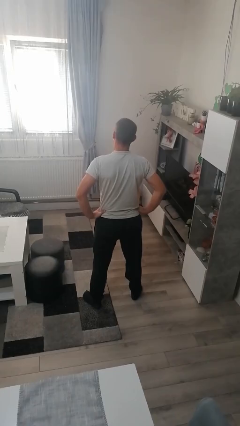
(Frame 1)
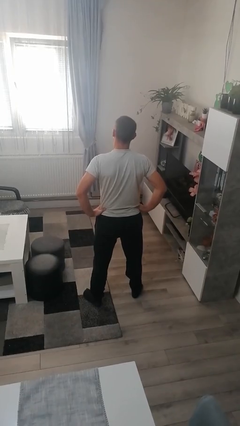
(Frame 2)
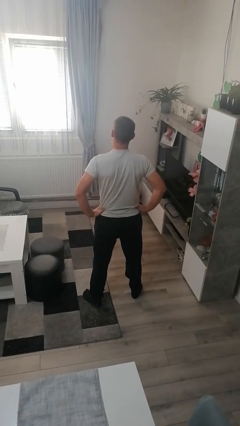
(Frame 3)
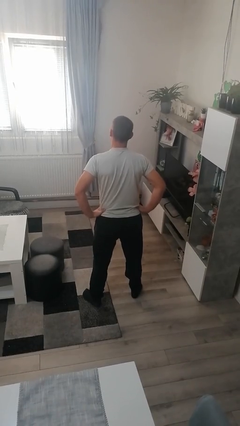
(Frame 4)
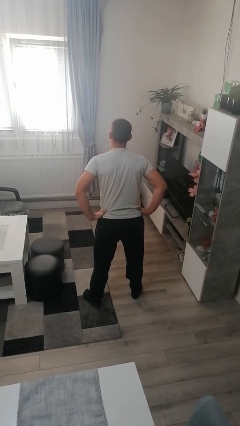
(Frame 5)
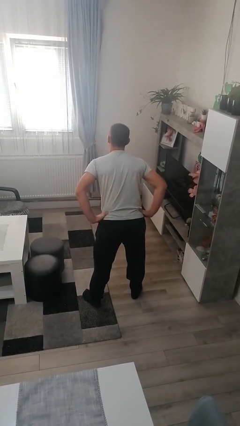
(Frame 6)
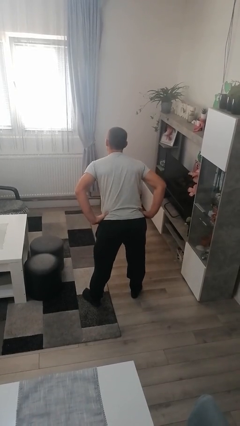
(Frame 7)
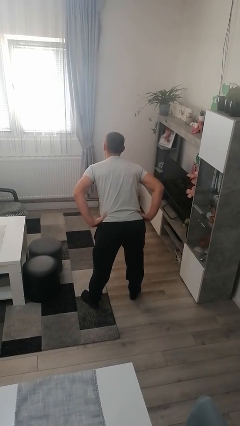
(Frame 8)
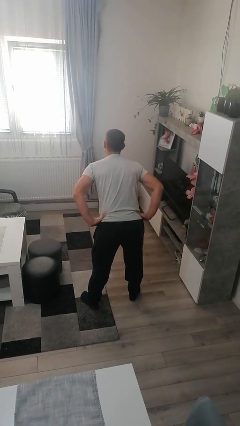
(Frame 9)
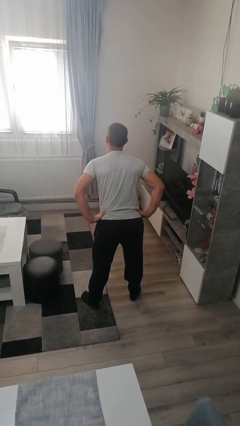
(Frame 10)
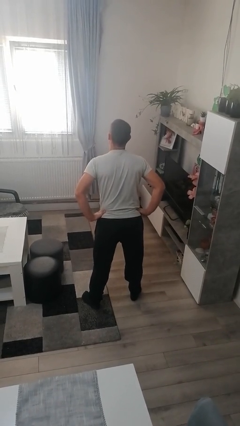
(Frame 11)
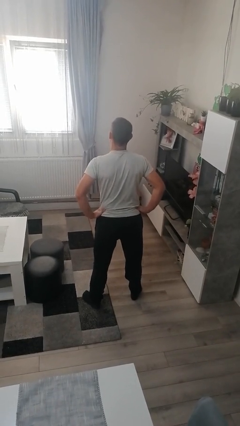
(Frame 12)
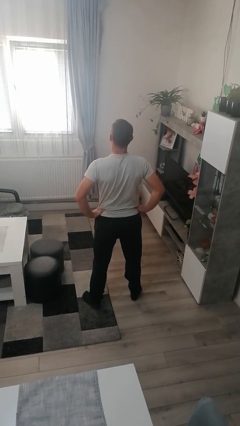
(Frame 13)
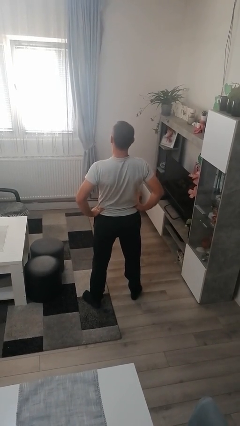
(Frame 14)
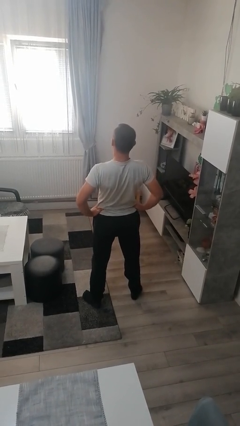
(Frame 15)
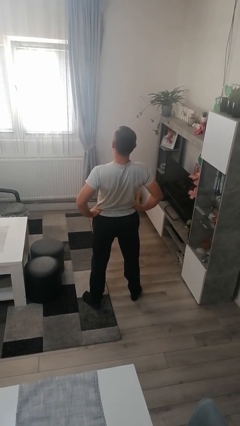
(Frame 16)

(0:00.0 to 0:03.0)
person wiggles hips

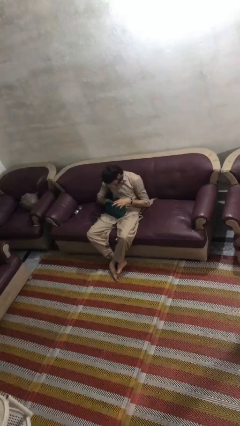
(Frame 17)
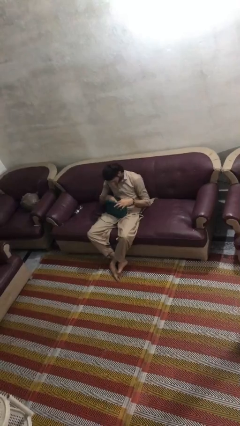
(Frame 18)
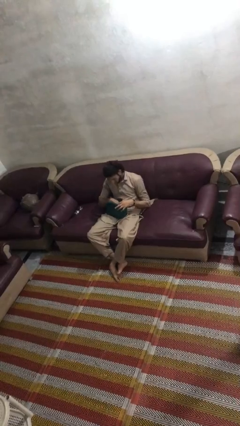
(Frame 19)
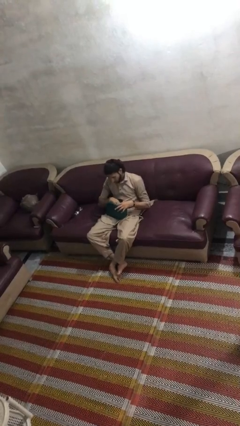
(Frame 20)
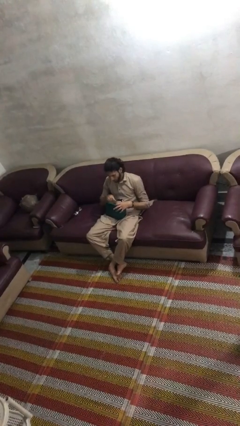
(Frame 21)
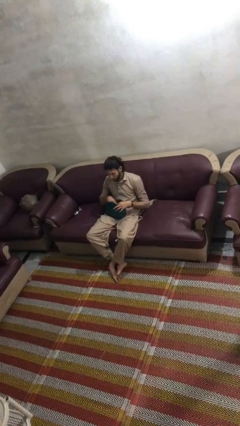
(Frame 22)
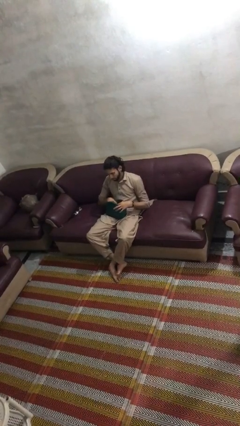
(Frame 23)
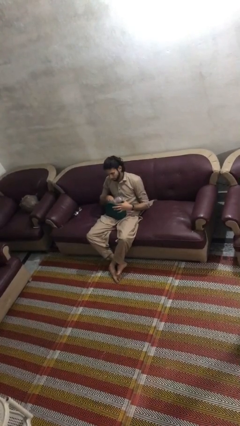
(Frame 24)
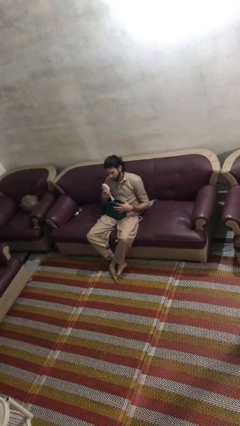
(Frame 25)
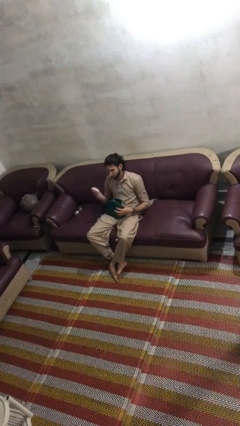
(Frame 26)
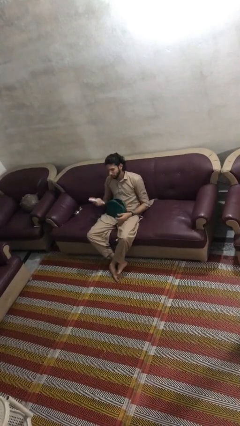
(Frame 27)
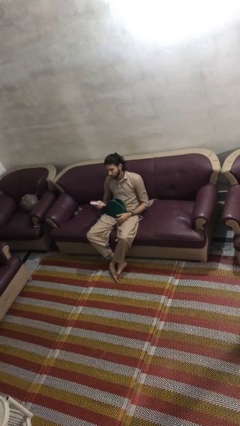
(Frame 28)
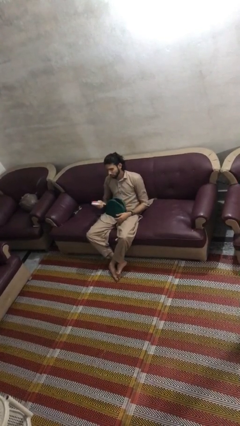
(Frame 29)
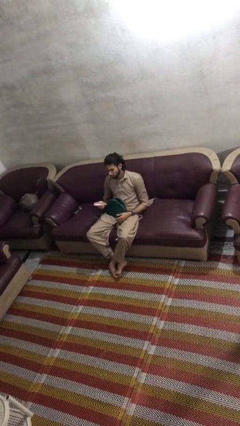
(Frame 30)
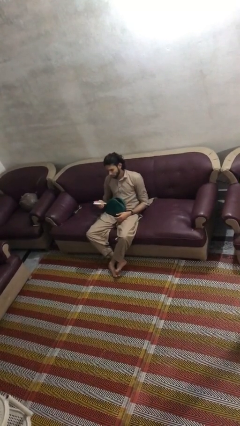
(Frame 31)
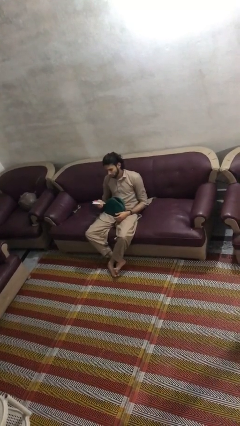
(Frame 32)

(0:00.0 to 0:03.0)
person takes object from purse

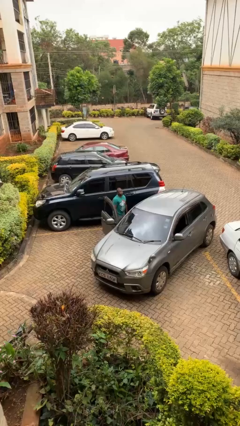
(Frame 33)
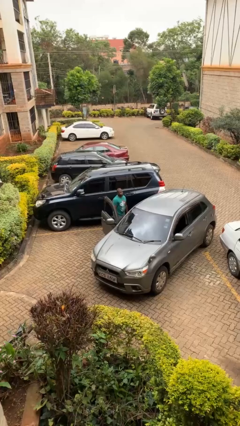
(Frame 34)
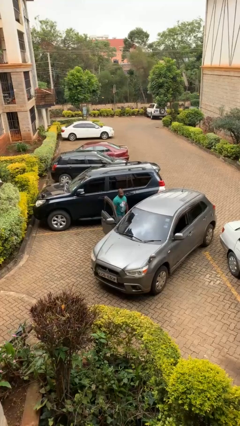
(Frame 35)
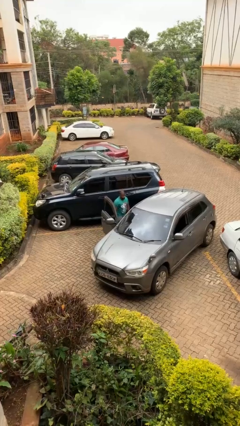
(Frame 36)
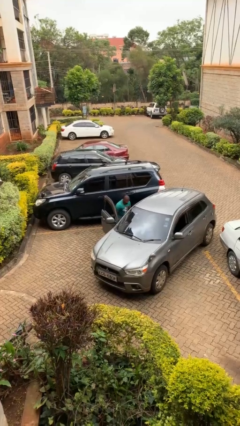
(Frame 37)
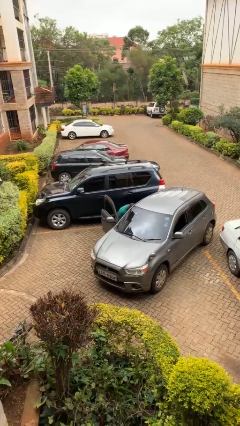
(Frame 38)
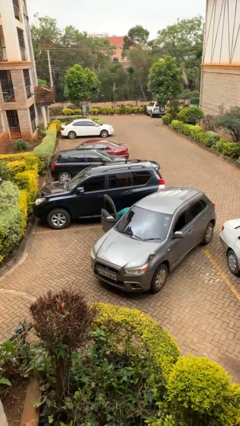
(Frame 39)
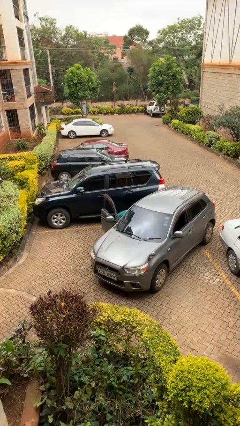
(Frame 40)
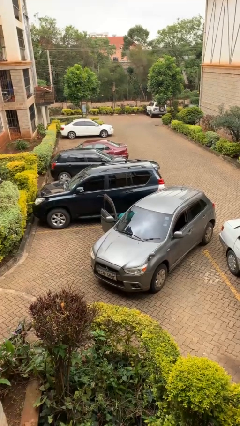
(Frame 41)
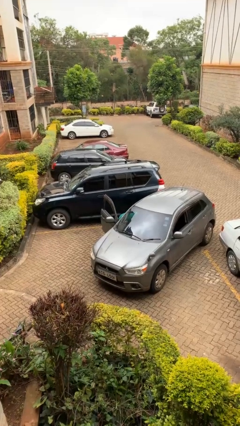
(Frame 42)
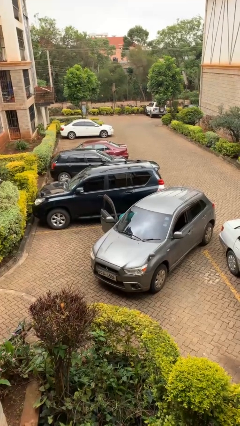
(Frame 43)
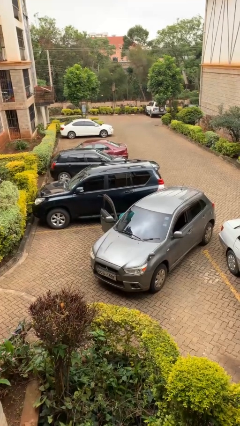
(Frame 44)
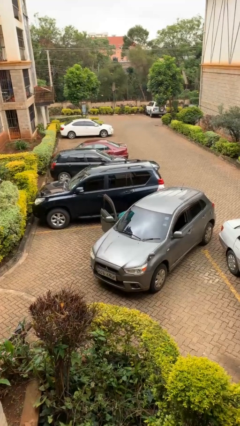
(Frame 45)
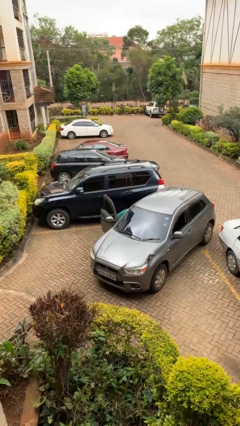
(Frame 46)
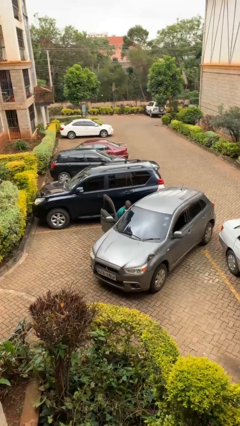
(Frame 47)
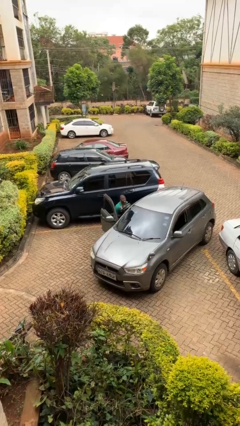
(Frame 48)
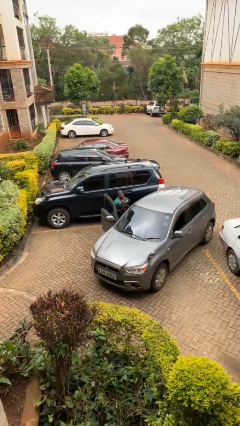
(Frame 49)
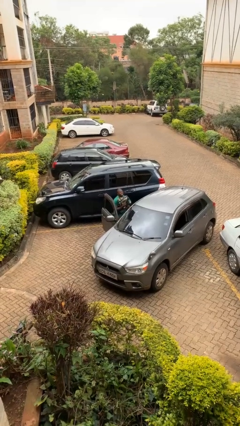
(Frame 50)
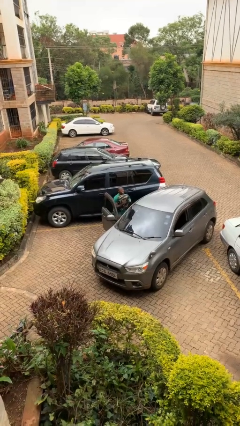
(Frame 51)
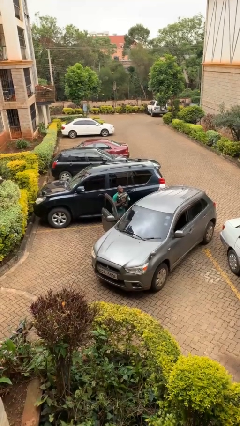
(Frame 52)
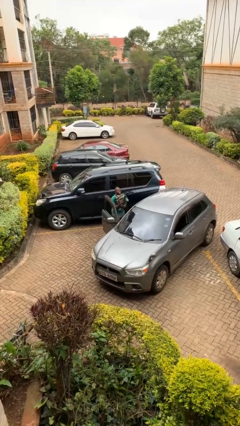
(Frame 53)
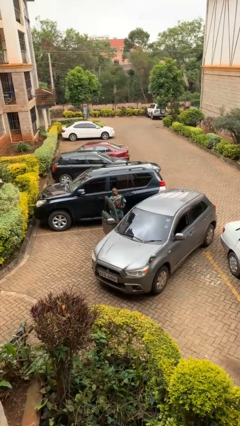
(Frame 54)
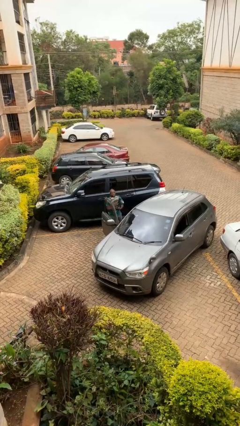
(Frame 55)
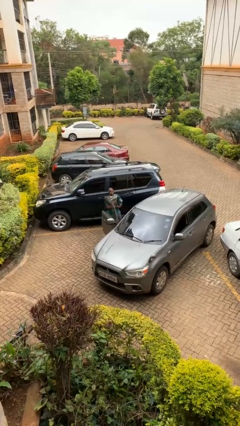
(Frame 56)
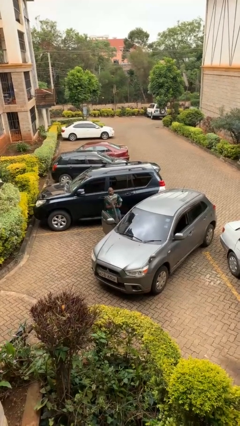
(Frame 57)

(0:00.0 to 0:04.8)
person unloads car

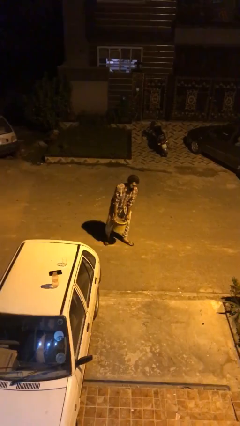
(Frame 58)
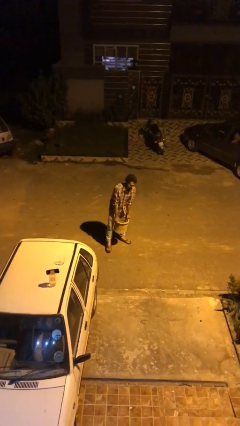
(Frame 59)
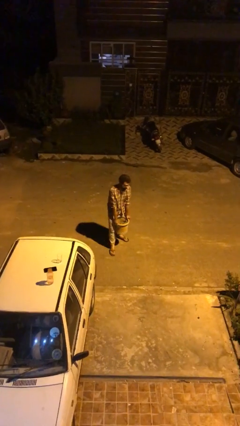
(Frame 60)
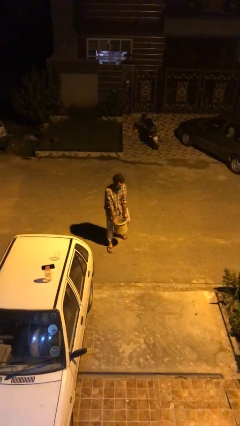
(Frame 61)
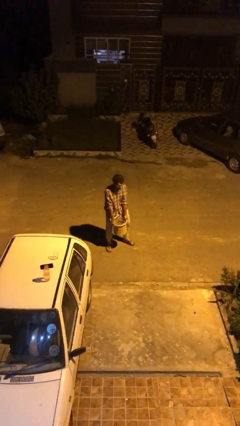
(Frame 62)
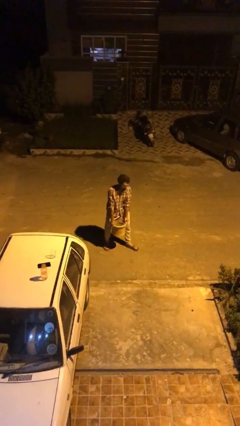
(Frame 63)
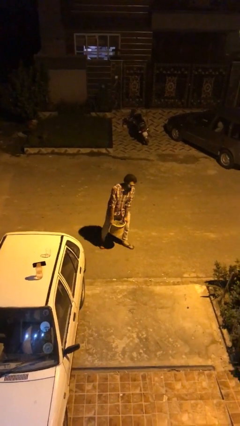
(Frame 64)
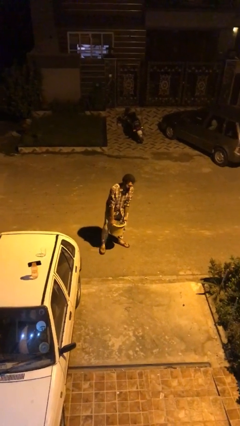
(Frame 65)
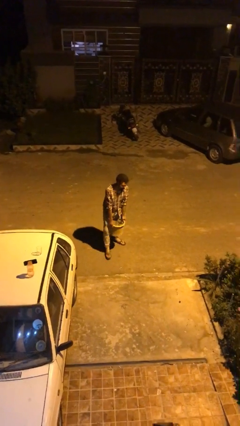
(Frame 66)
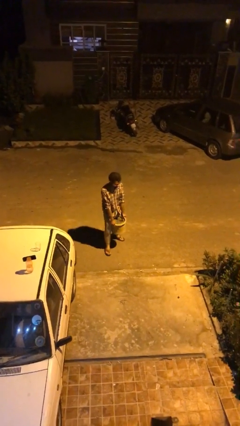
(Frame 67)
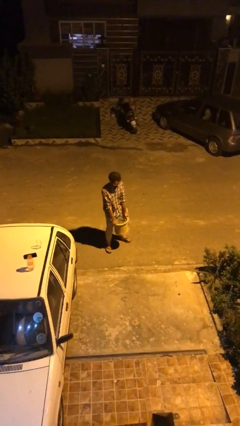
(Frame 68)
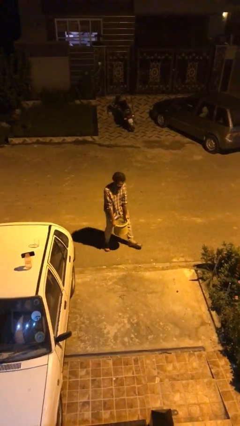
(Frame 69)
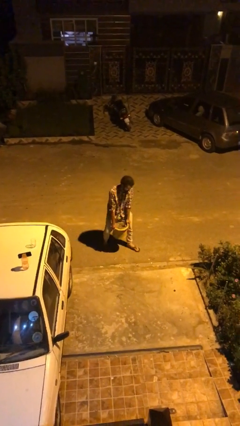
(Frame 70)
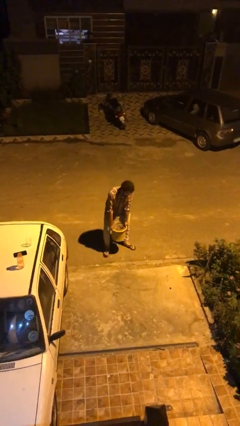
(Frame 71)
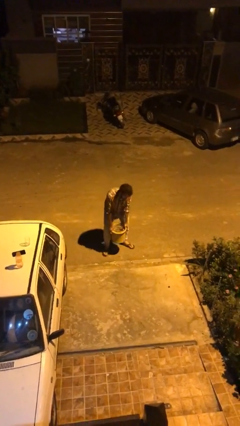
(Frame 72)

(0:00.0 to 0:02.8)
person carries heavy object

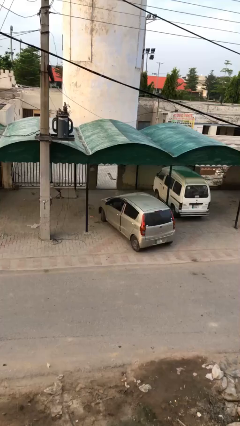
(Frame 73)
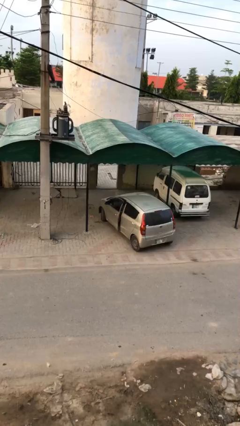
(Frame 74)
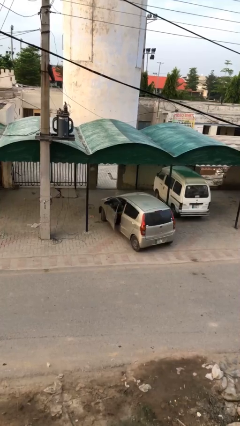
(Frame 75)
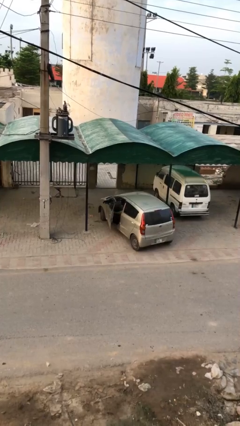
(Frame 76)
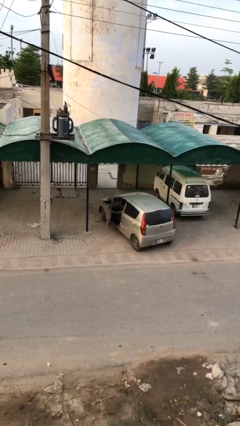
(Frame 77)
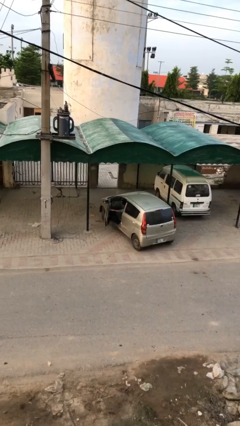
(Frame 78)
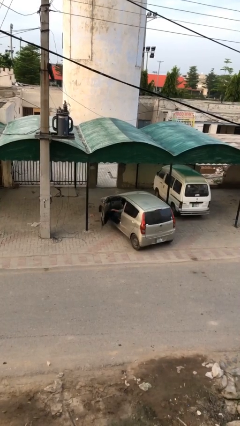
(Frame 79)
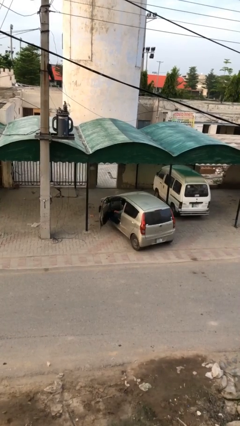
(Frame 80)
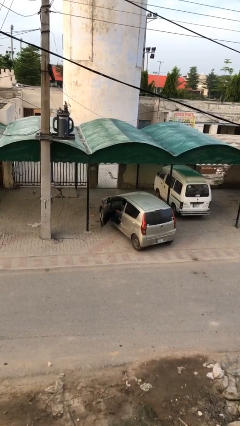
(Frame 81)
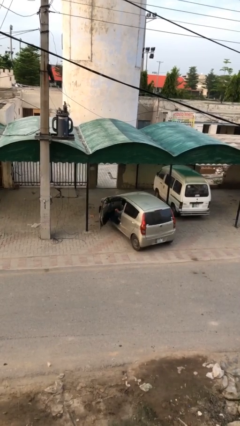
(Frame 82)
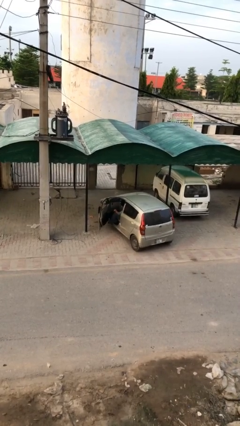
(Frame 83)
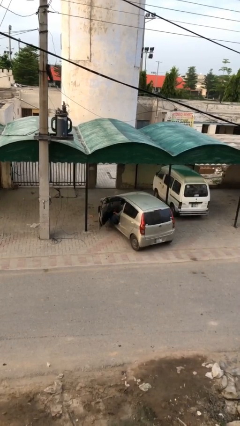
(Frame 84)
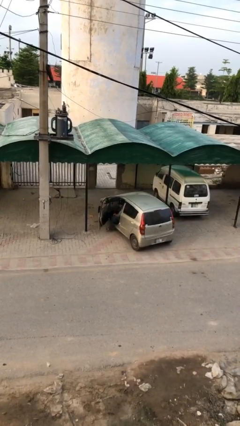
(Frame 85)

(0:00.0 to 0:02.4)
person opens car door

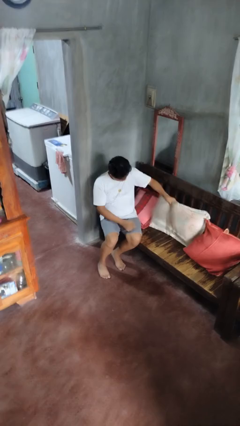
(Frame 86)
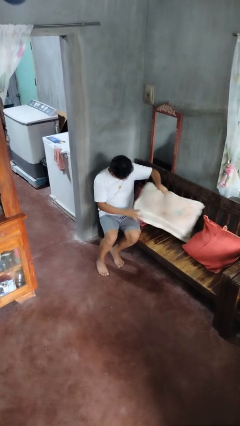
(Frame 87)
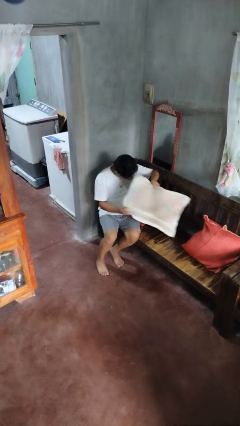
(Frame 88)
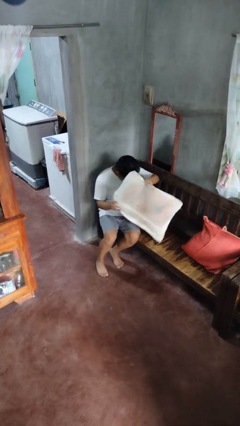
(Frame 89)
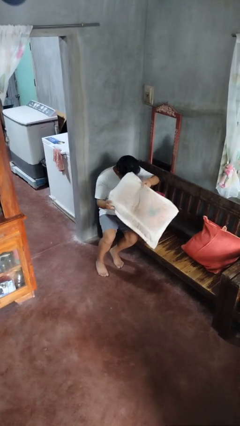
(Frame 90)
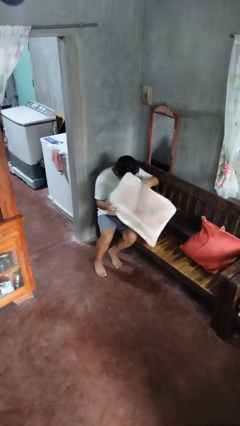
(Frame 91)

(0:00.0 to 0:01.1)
person searches in couch
